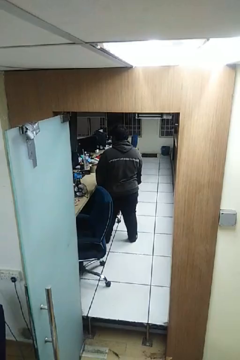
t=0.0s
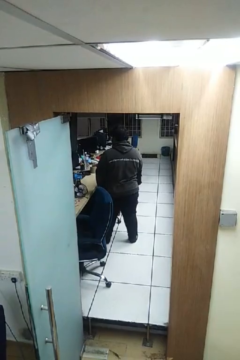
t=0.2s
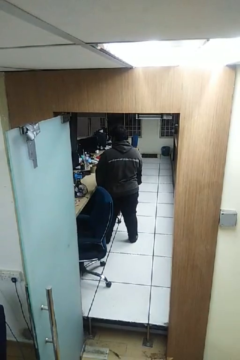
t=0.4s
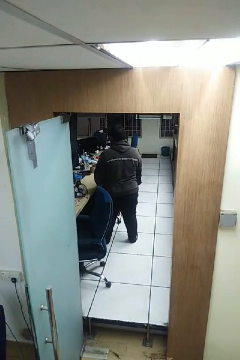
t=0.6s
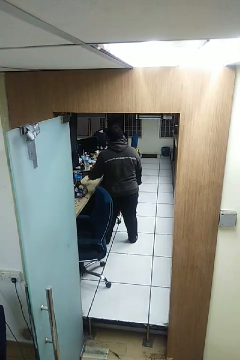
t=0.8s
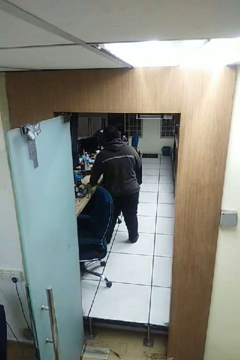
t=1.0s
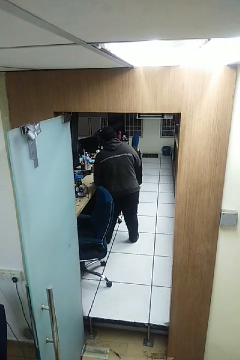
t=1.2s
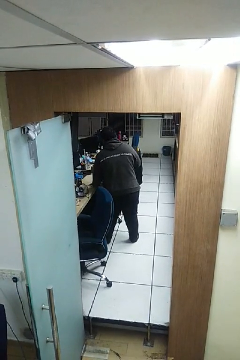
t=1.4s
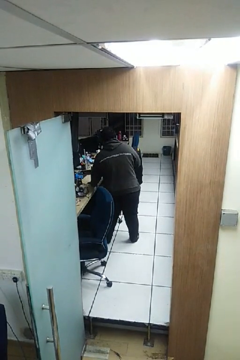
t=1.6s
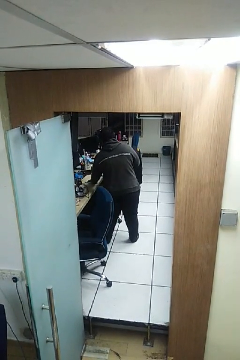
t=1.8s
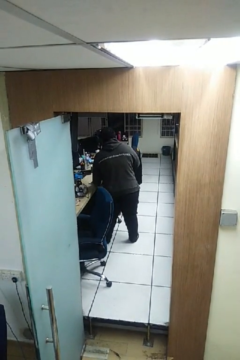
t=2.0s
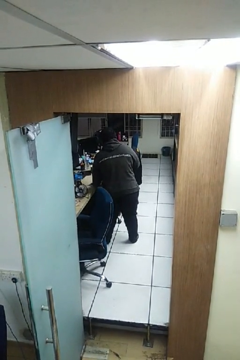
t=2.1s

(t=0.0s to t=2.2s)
person cleans table with rag

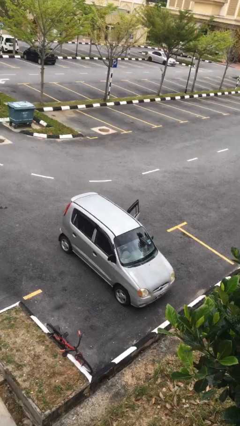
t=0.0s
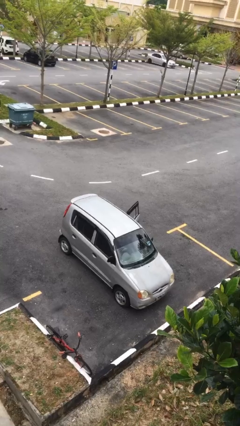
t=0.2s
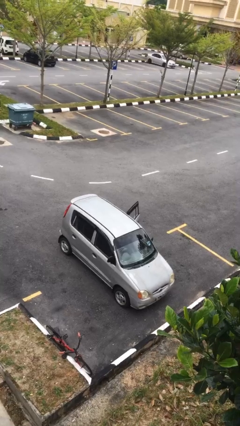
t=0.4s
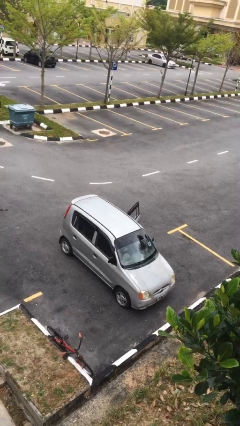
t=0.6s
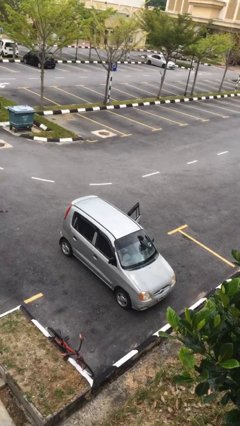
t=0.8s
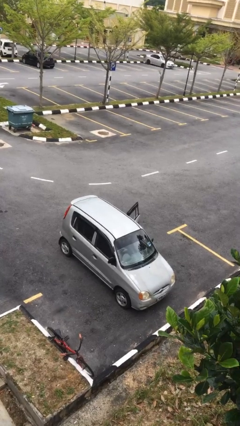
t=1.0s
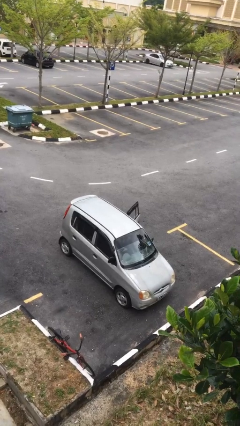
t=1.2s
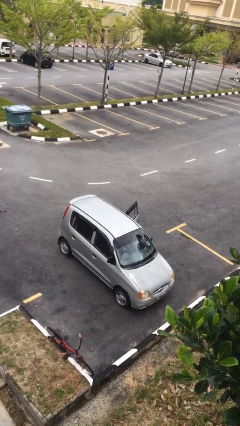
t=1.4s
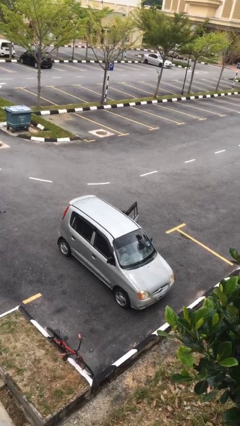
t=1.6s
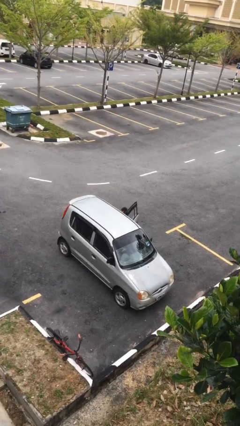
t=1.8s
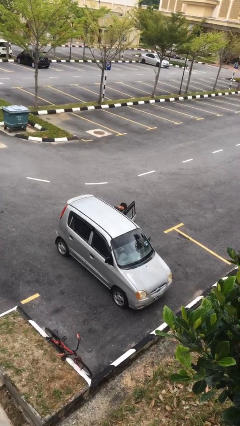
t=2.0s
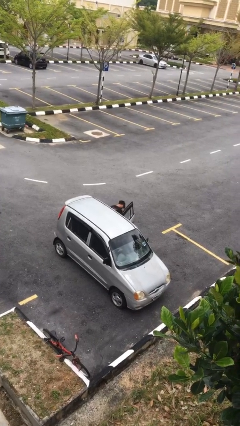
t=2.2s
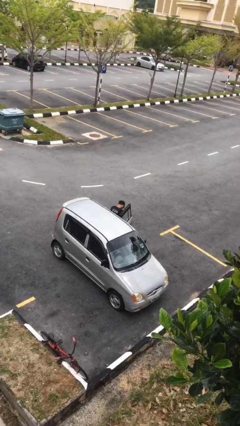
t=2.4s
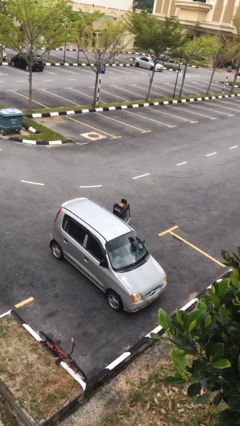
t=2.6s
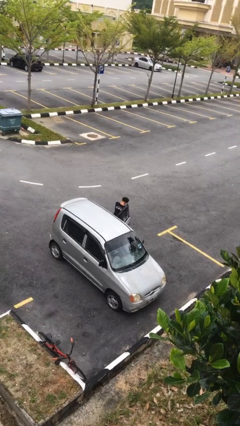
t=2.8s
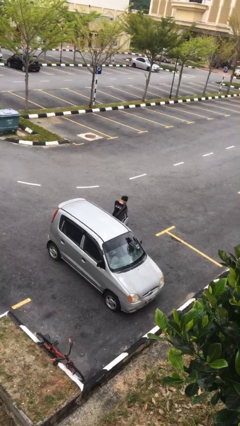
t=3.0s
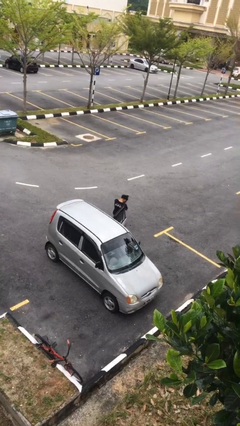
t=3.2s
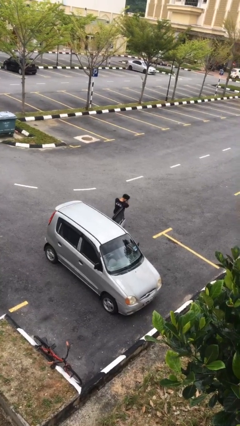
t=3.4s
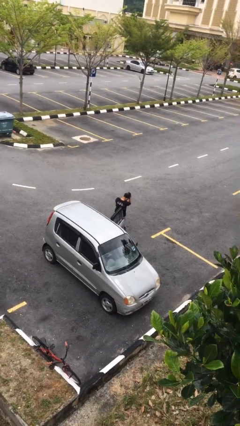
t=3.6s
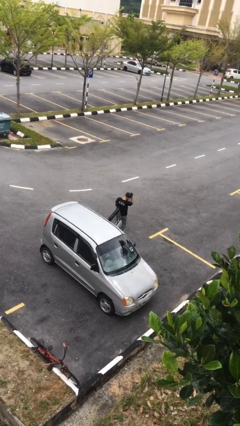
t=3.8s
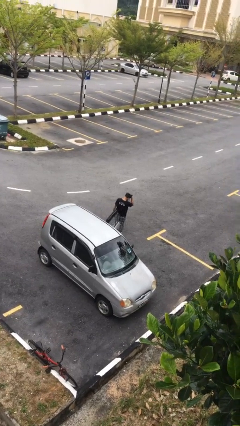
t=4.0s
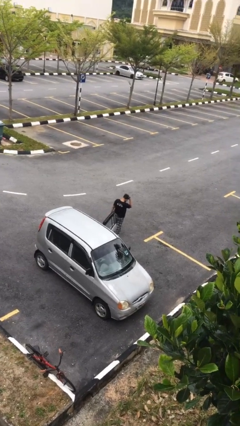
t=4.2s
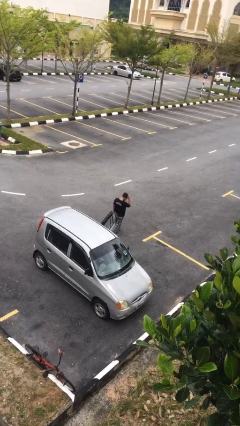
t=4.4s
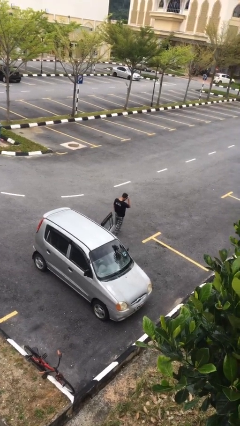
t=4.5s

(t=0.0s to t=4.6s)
person exits car

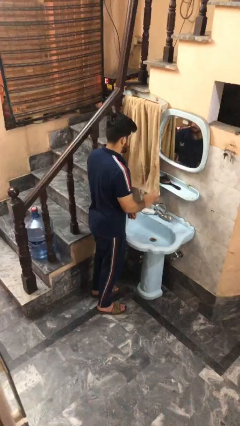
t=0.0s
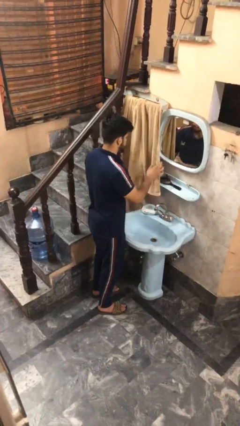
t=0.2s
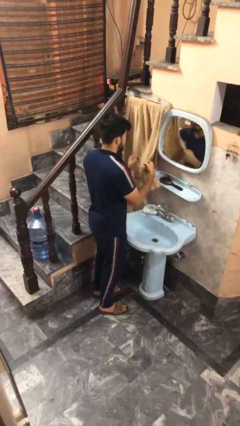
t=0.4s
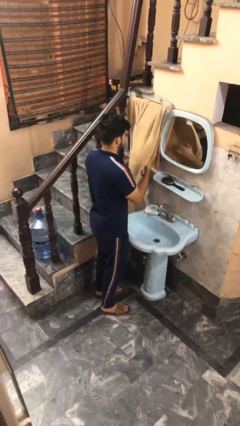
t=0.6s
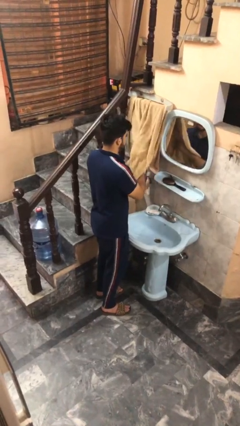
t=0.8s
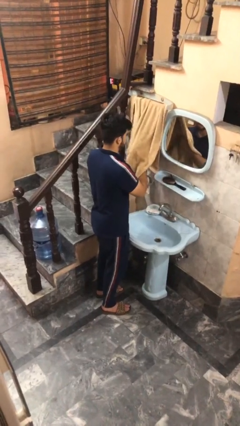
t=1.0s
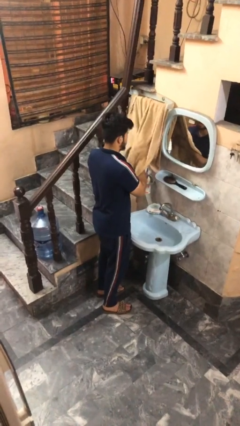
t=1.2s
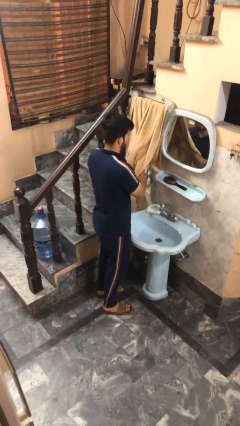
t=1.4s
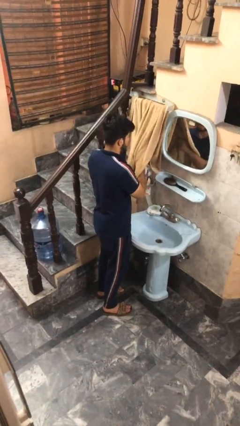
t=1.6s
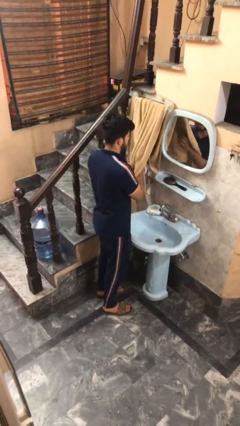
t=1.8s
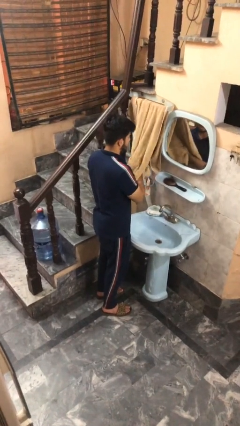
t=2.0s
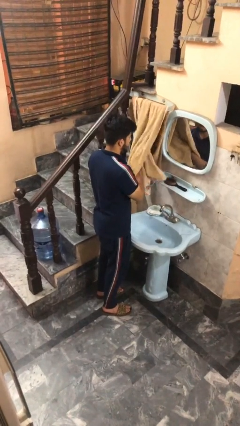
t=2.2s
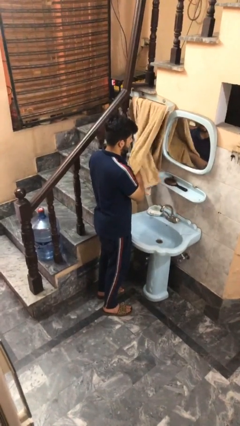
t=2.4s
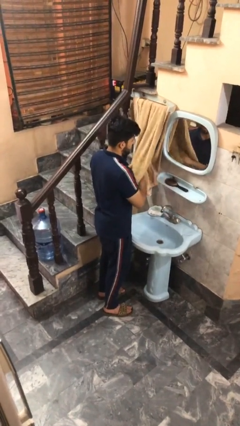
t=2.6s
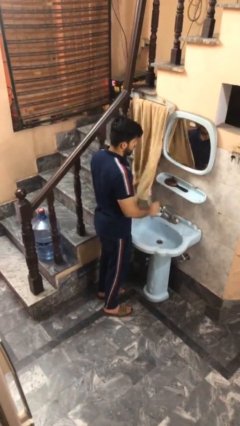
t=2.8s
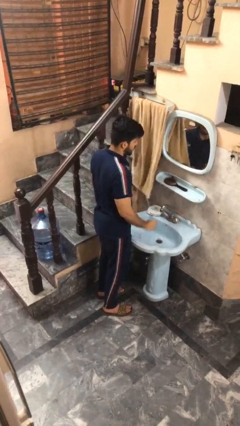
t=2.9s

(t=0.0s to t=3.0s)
person dries hands with towel

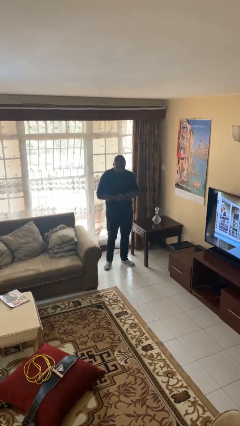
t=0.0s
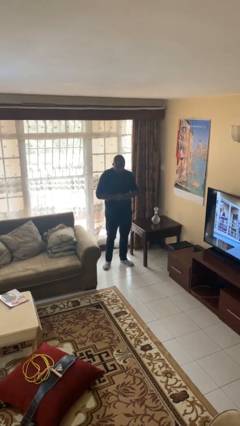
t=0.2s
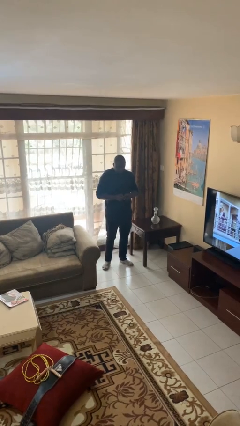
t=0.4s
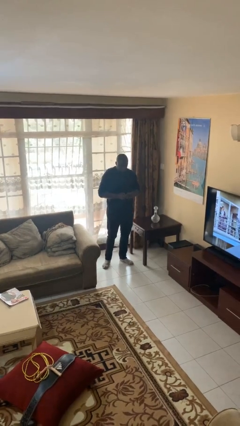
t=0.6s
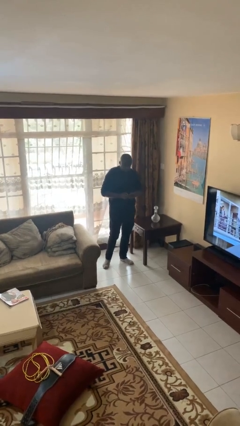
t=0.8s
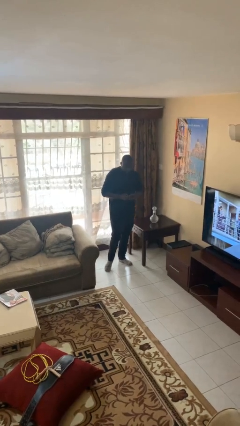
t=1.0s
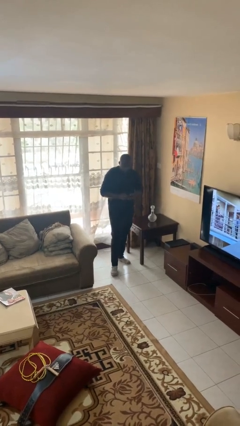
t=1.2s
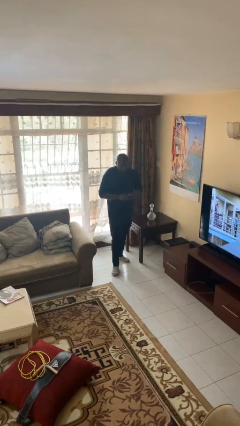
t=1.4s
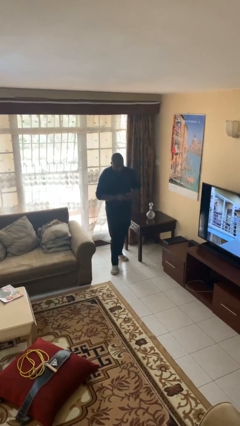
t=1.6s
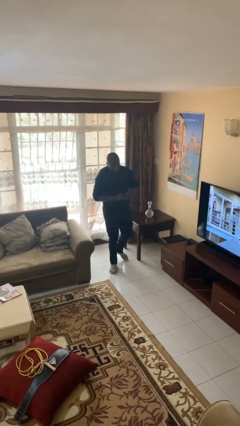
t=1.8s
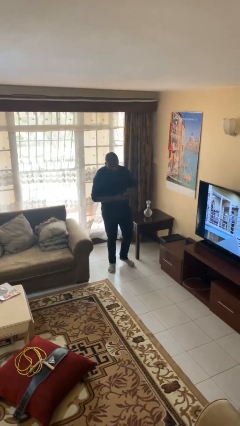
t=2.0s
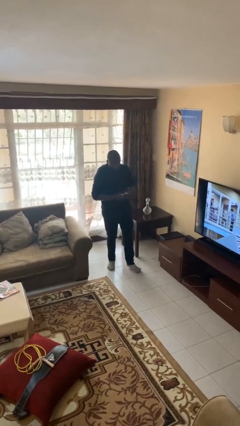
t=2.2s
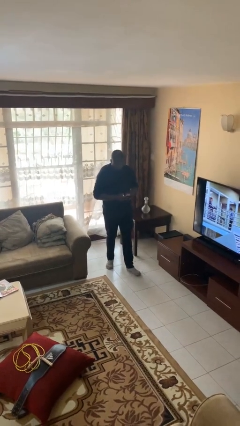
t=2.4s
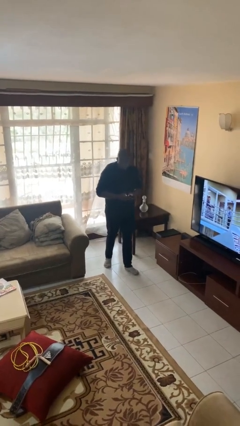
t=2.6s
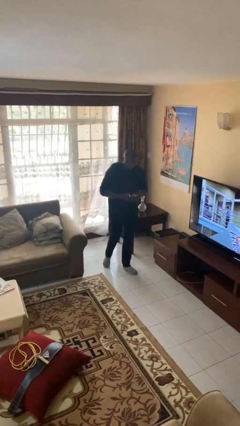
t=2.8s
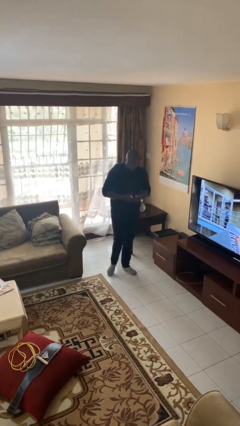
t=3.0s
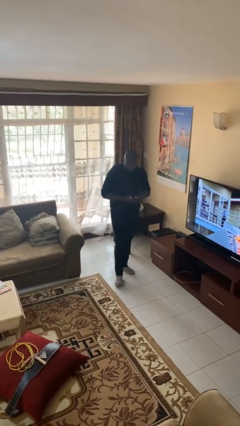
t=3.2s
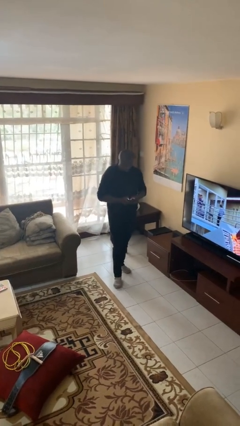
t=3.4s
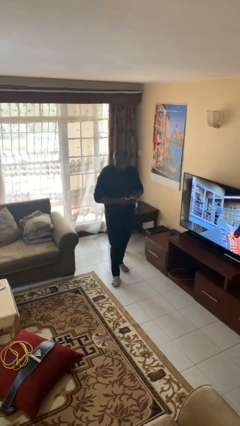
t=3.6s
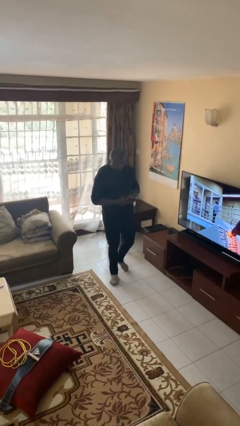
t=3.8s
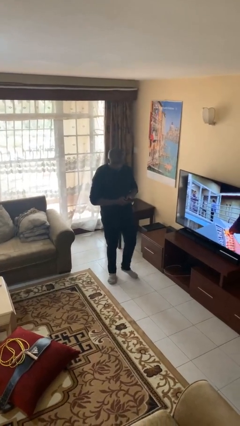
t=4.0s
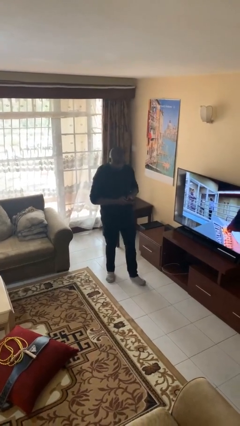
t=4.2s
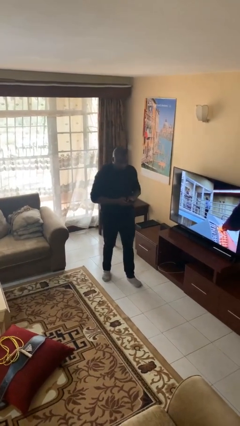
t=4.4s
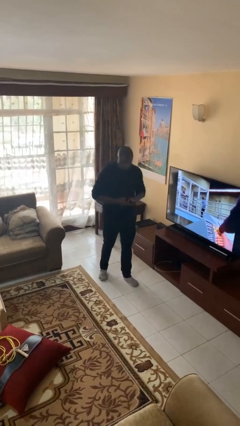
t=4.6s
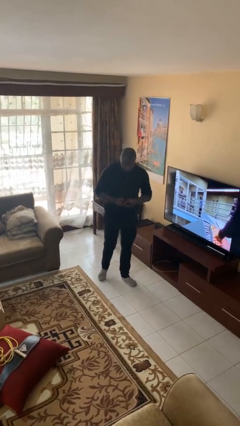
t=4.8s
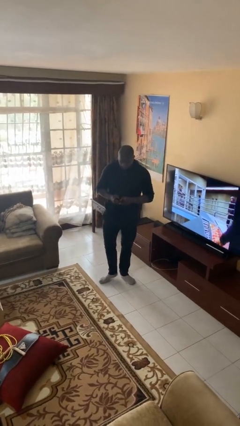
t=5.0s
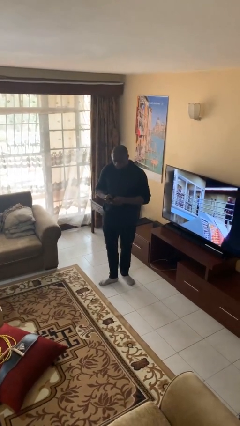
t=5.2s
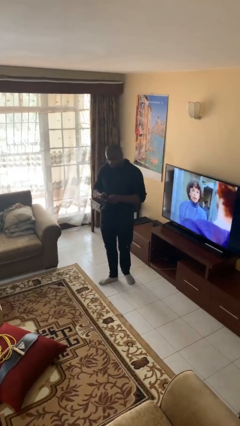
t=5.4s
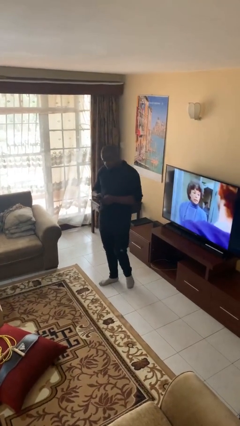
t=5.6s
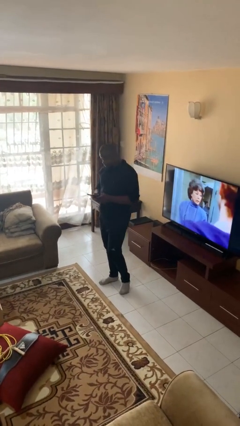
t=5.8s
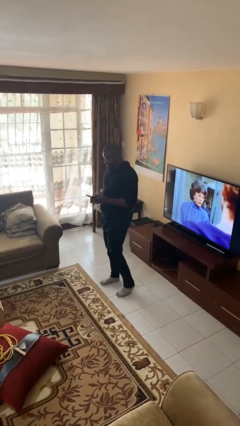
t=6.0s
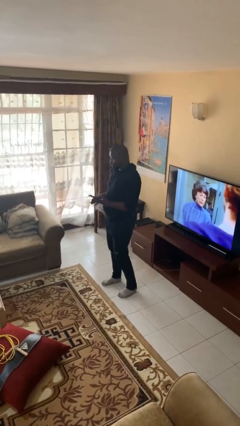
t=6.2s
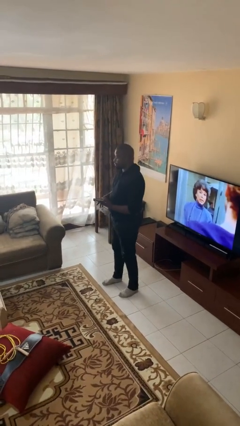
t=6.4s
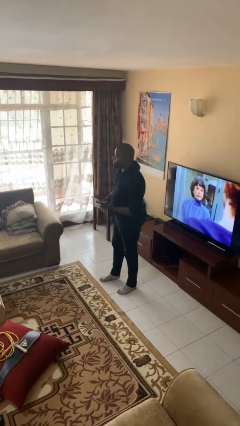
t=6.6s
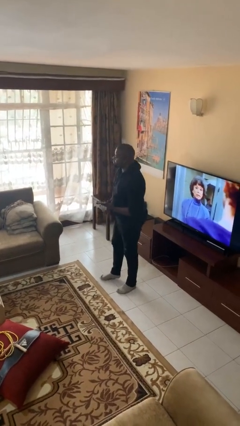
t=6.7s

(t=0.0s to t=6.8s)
person texts on phone

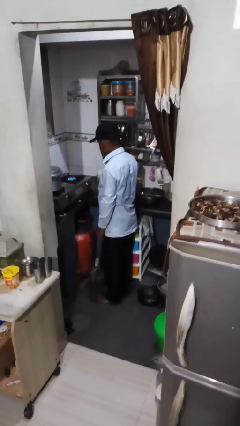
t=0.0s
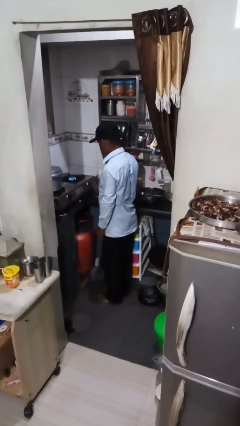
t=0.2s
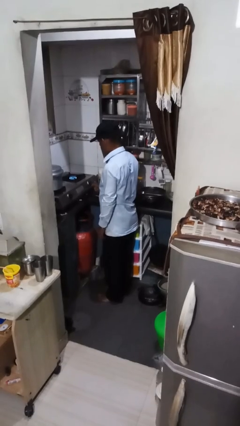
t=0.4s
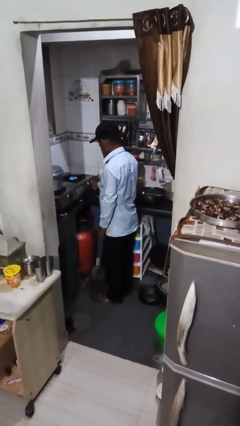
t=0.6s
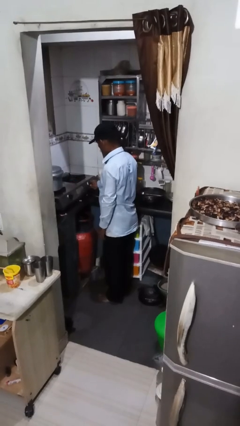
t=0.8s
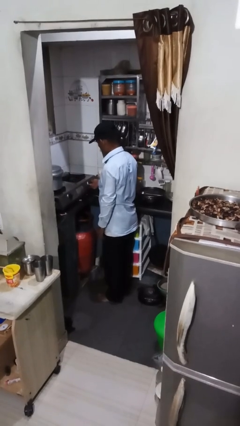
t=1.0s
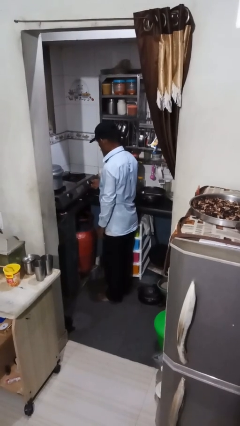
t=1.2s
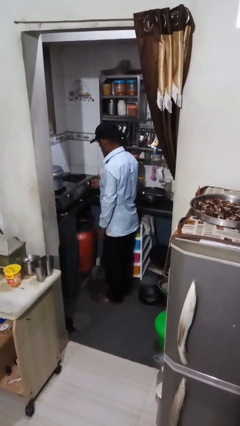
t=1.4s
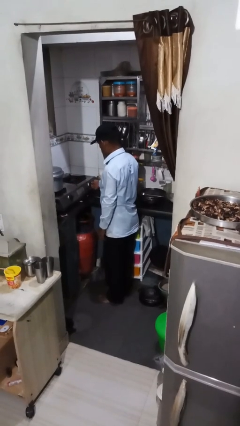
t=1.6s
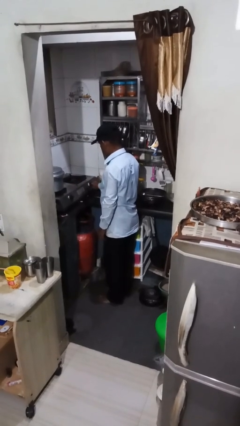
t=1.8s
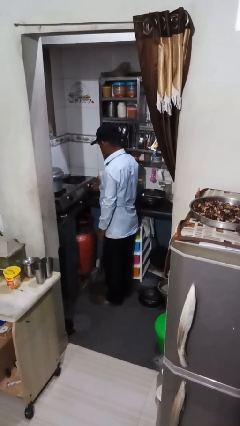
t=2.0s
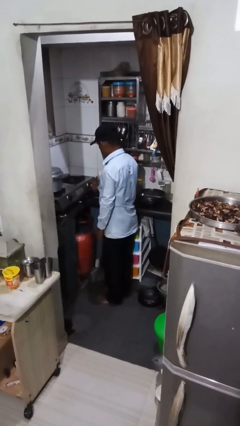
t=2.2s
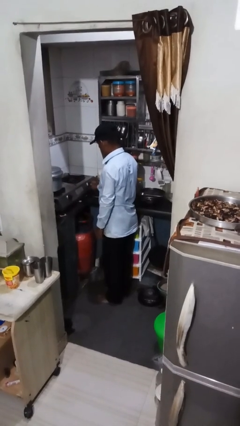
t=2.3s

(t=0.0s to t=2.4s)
person turns off stovetop
